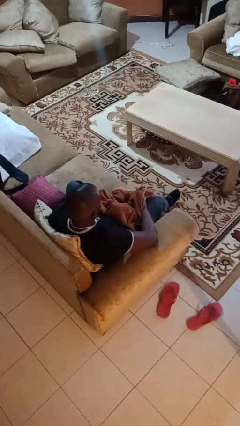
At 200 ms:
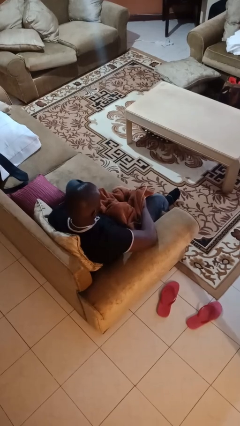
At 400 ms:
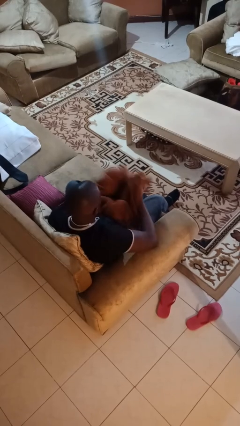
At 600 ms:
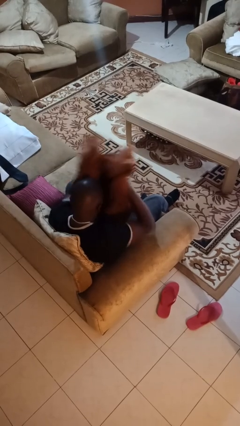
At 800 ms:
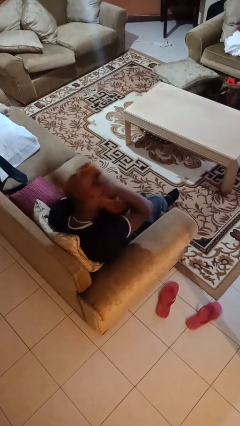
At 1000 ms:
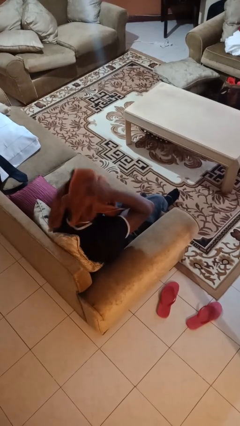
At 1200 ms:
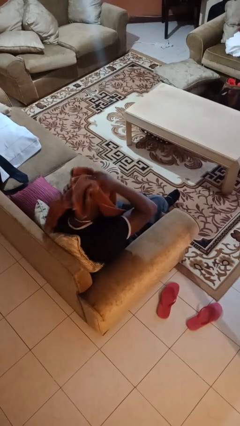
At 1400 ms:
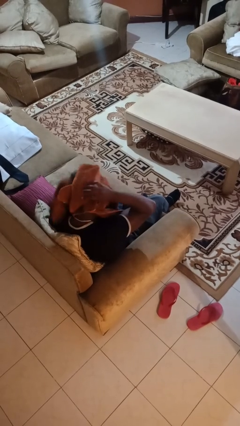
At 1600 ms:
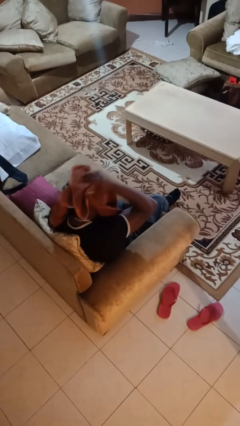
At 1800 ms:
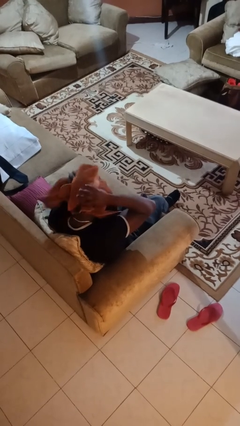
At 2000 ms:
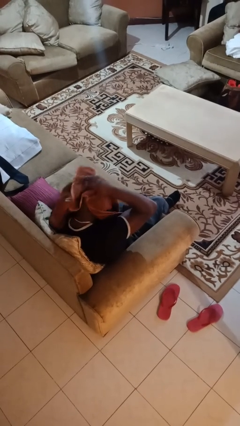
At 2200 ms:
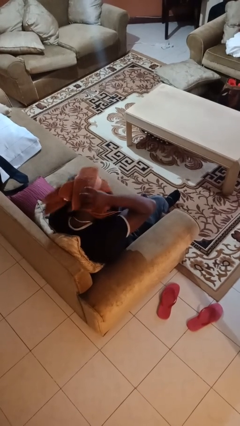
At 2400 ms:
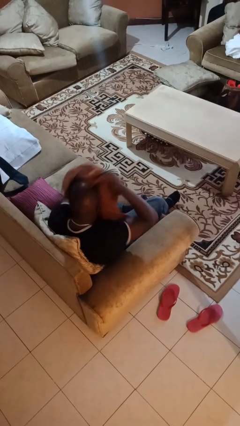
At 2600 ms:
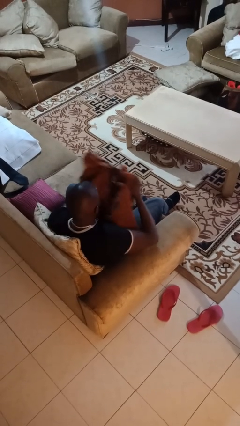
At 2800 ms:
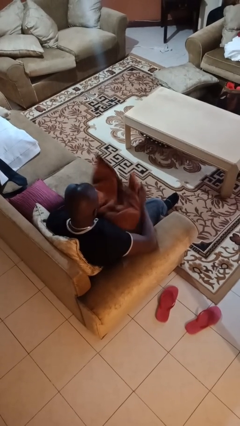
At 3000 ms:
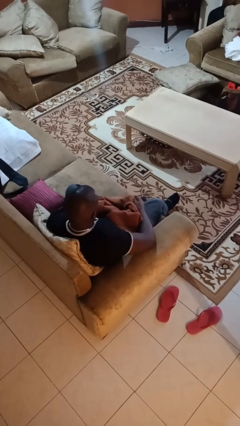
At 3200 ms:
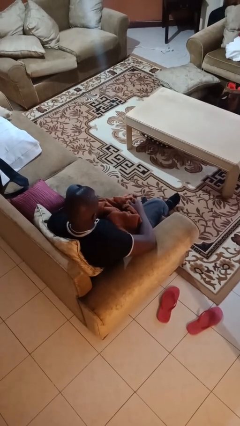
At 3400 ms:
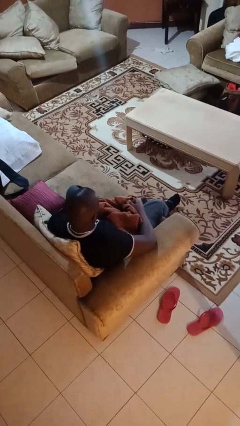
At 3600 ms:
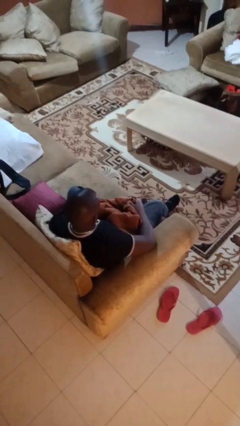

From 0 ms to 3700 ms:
person dries hair with towel

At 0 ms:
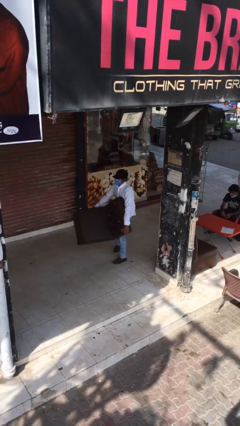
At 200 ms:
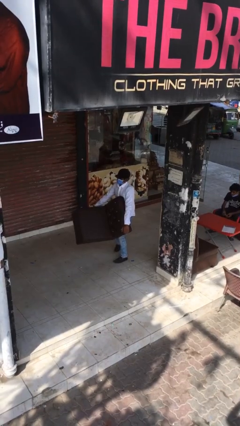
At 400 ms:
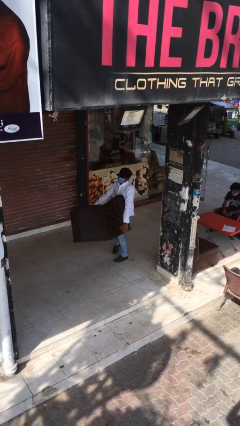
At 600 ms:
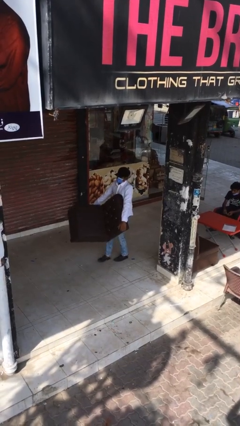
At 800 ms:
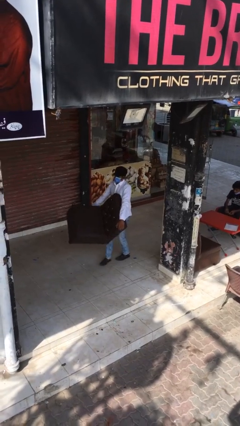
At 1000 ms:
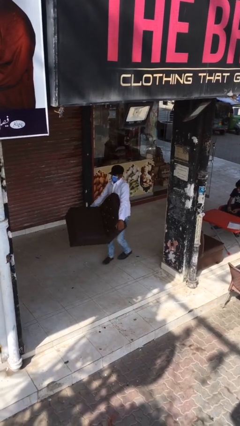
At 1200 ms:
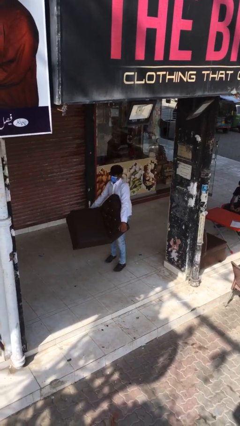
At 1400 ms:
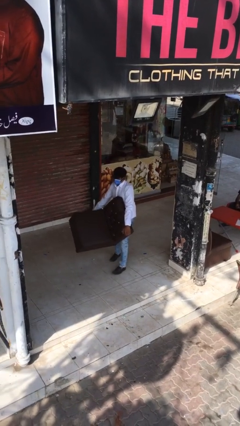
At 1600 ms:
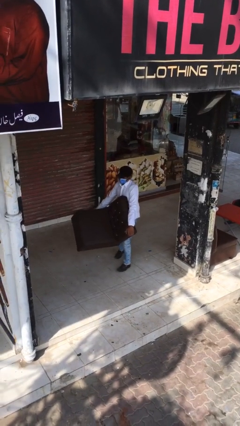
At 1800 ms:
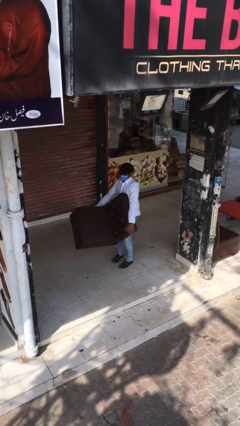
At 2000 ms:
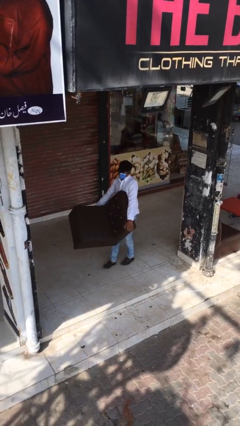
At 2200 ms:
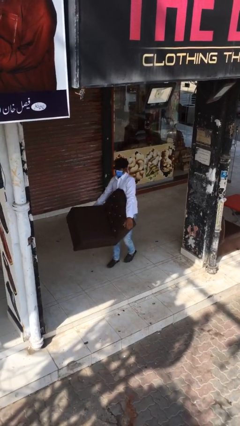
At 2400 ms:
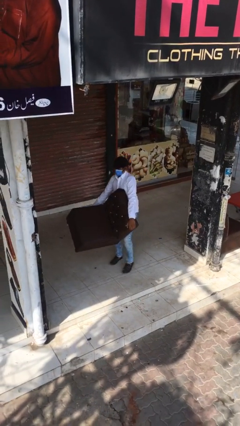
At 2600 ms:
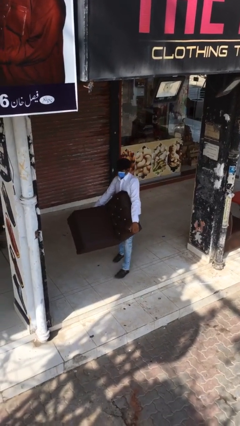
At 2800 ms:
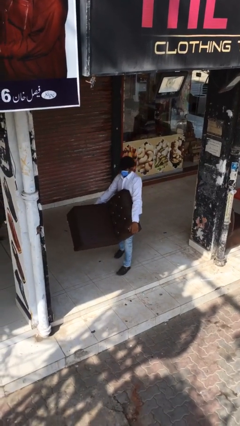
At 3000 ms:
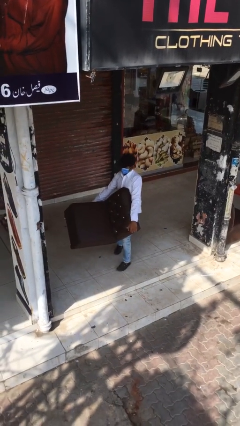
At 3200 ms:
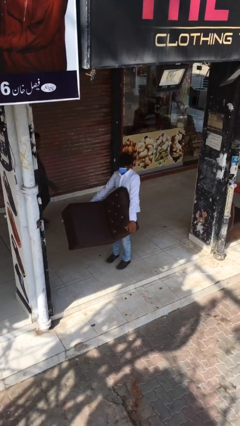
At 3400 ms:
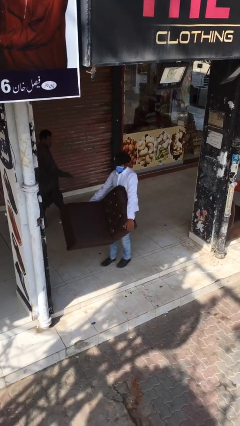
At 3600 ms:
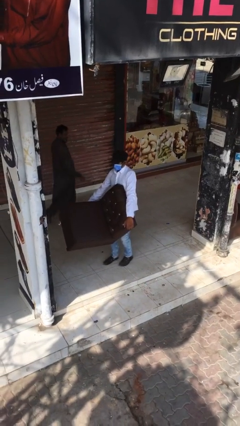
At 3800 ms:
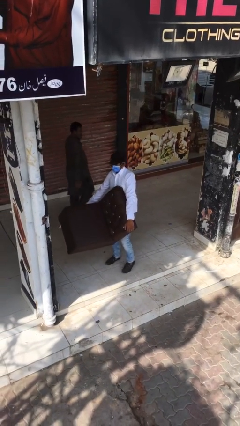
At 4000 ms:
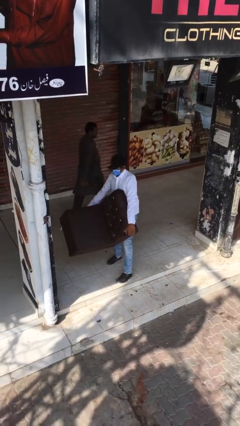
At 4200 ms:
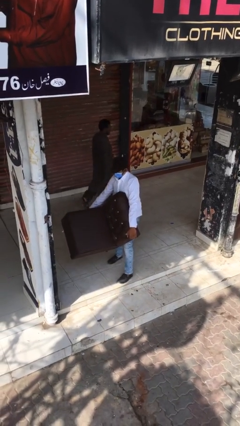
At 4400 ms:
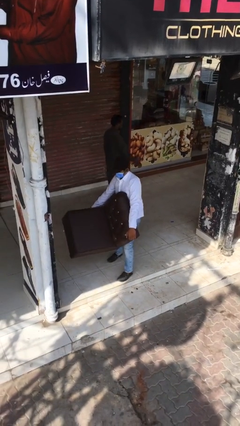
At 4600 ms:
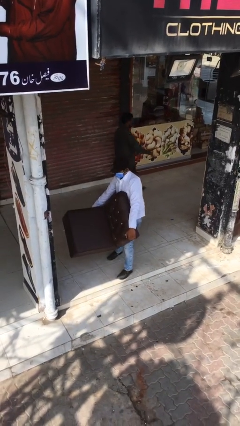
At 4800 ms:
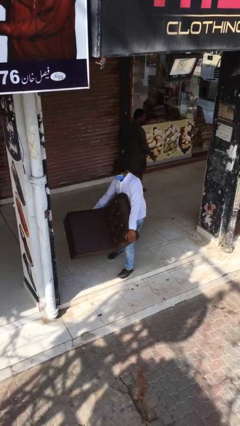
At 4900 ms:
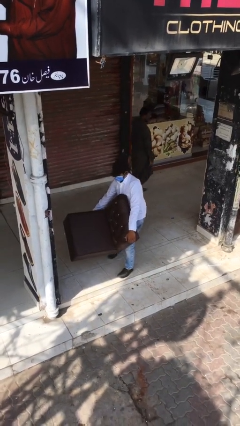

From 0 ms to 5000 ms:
person carries heavy object

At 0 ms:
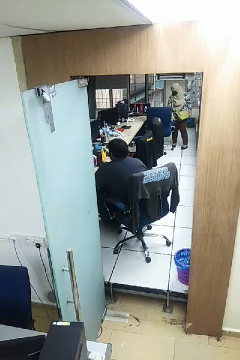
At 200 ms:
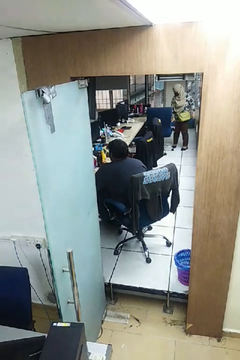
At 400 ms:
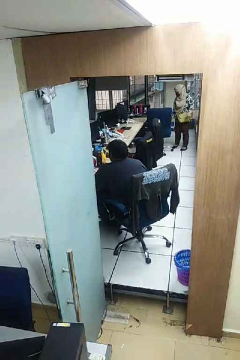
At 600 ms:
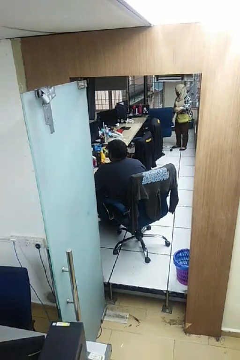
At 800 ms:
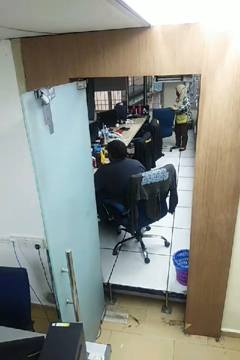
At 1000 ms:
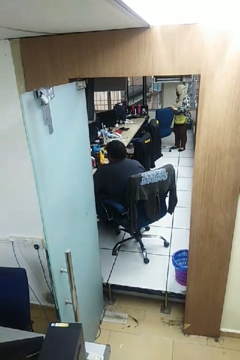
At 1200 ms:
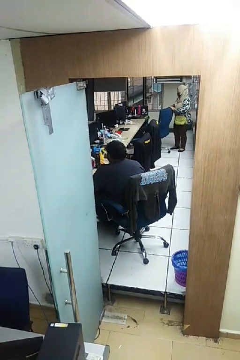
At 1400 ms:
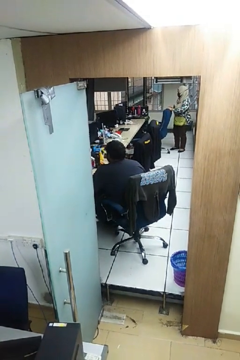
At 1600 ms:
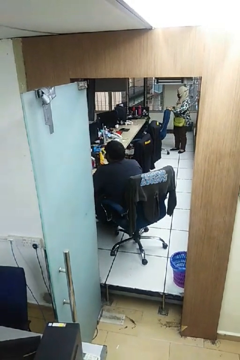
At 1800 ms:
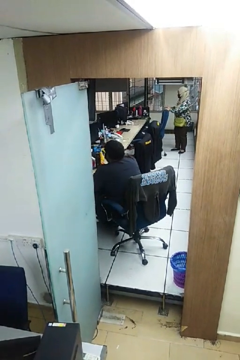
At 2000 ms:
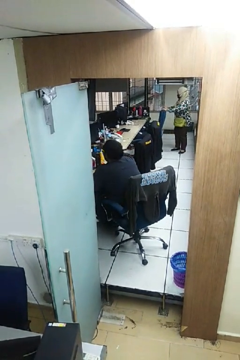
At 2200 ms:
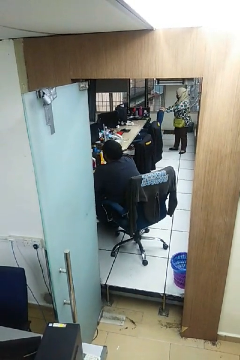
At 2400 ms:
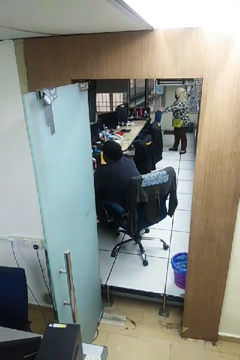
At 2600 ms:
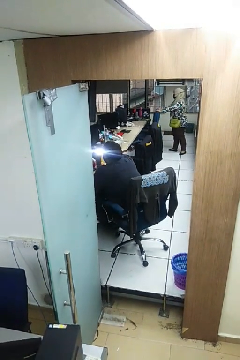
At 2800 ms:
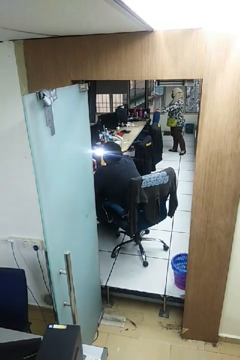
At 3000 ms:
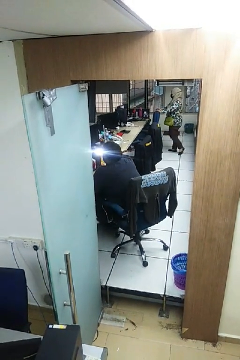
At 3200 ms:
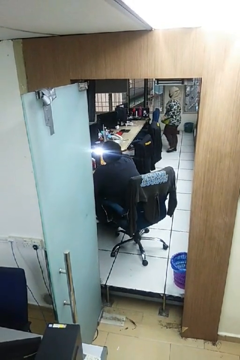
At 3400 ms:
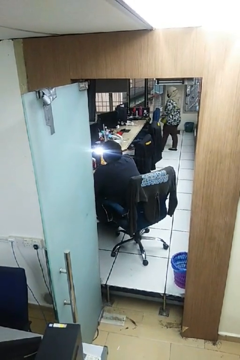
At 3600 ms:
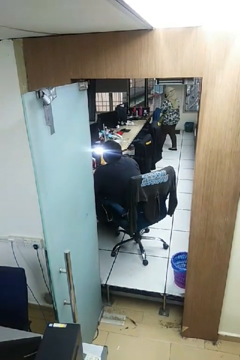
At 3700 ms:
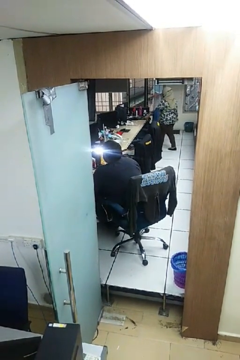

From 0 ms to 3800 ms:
person turns on lamp

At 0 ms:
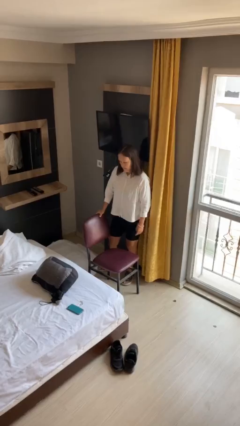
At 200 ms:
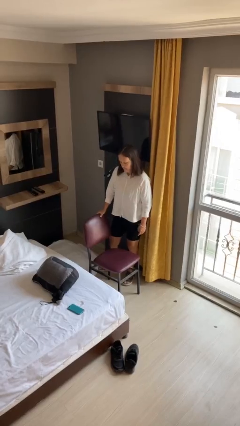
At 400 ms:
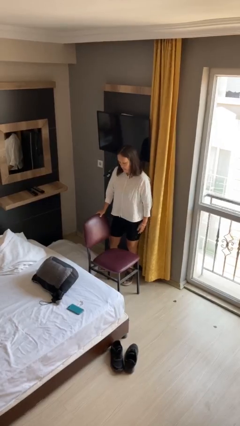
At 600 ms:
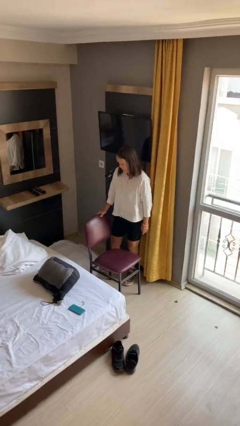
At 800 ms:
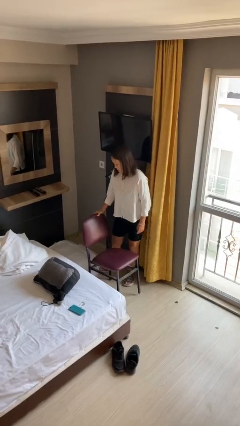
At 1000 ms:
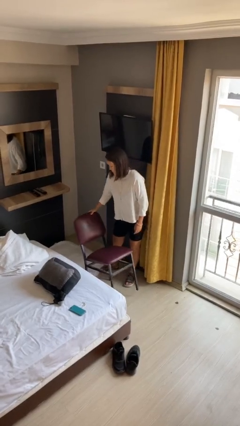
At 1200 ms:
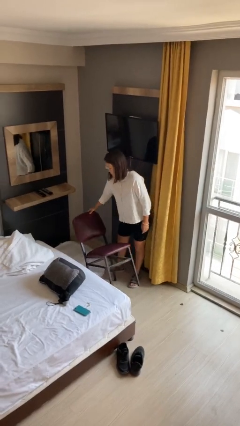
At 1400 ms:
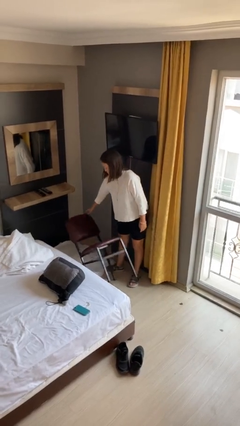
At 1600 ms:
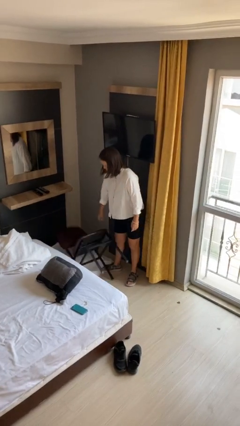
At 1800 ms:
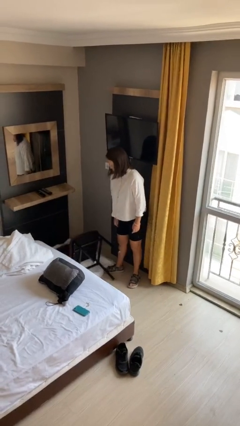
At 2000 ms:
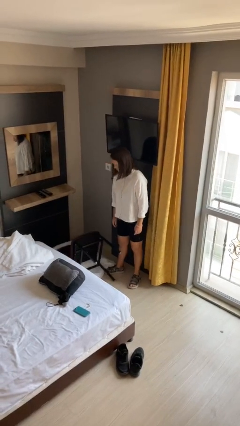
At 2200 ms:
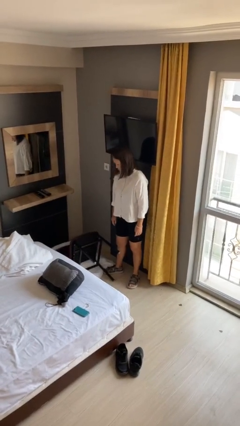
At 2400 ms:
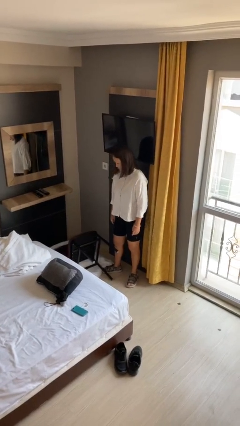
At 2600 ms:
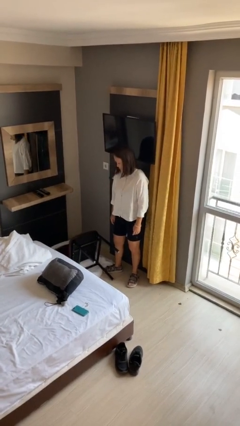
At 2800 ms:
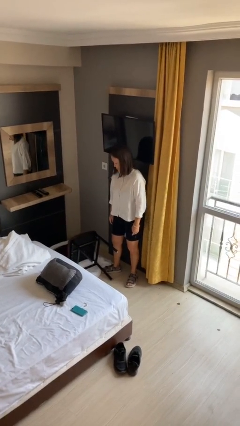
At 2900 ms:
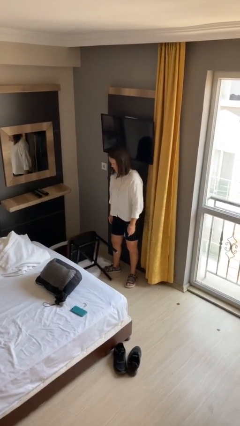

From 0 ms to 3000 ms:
person knocks over furniture

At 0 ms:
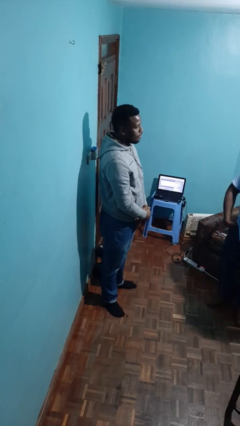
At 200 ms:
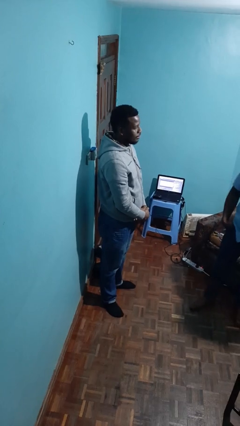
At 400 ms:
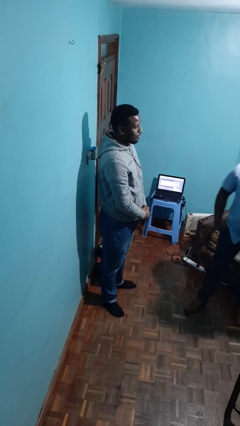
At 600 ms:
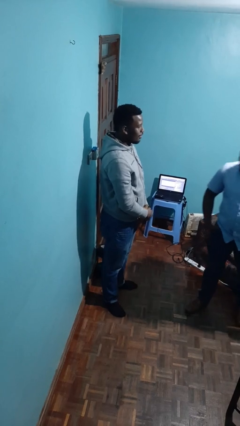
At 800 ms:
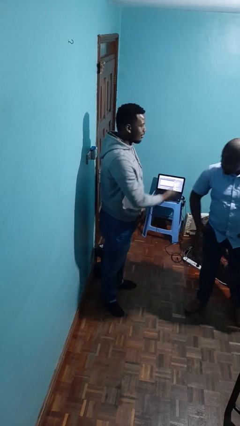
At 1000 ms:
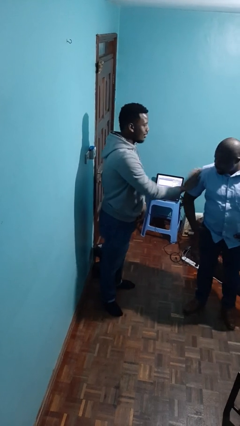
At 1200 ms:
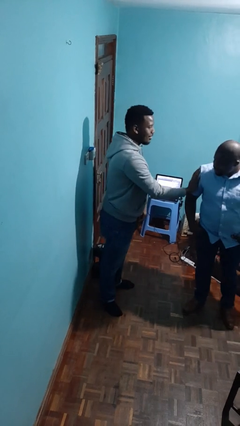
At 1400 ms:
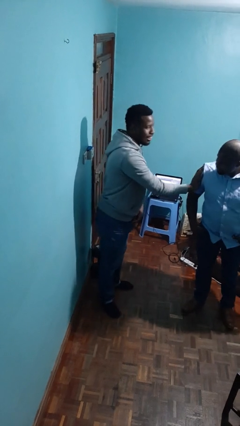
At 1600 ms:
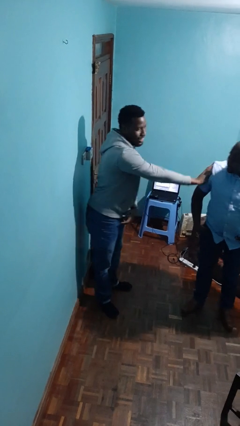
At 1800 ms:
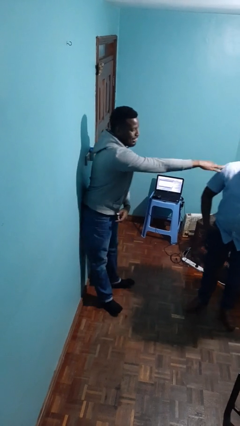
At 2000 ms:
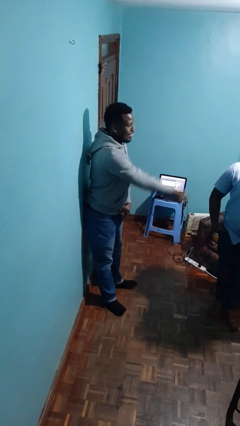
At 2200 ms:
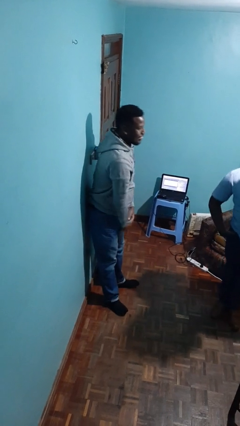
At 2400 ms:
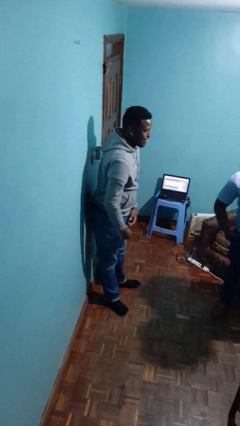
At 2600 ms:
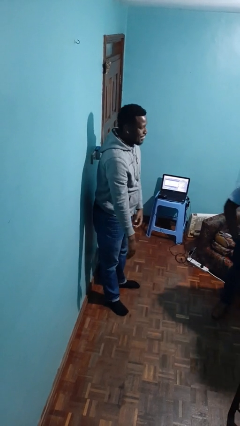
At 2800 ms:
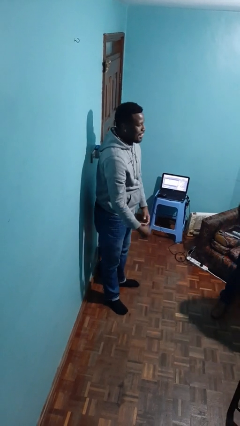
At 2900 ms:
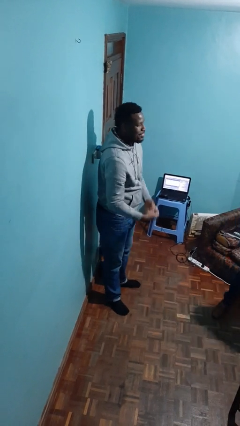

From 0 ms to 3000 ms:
person shoves person
